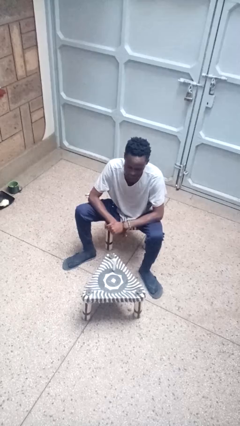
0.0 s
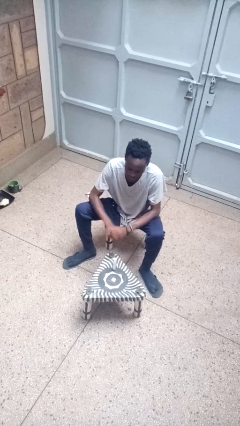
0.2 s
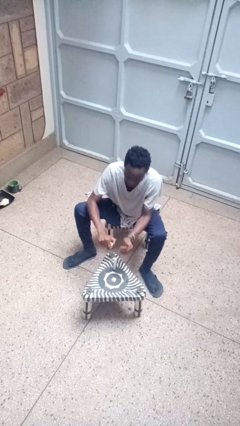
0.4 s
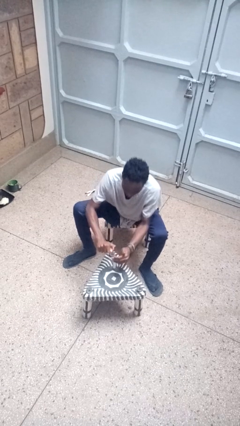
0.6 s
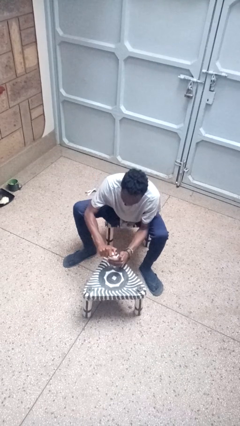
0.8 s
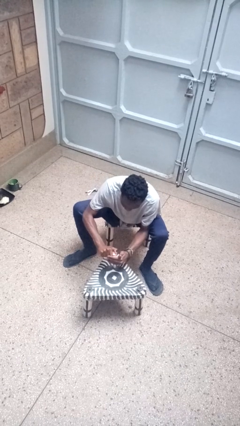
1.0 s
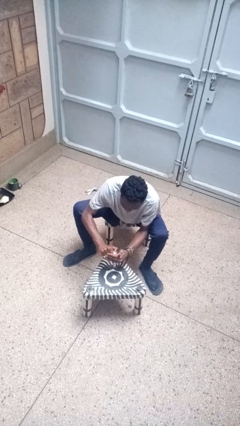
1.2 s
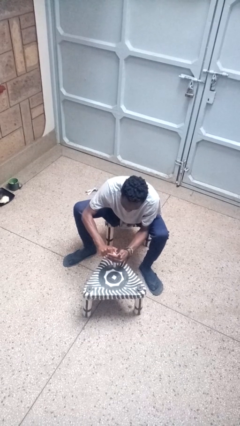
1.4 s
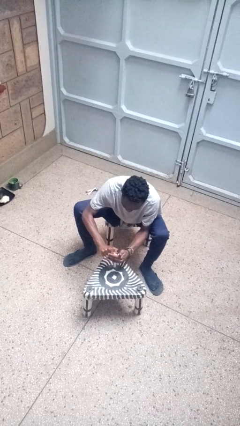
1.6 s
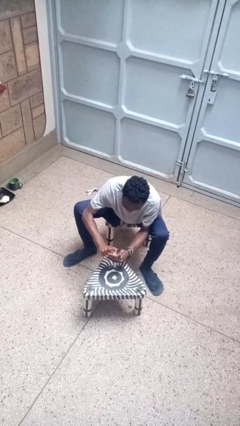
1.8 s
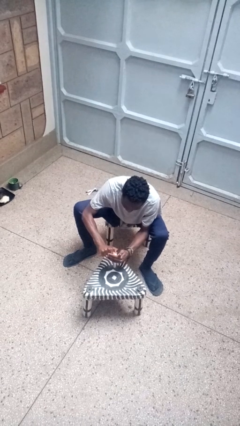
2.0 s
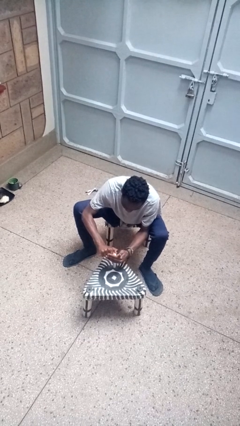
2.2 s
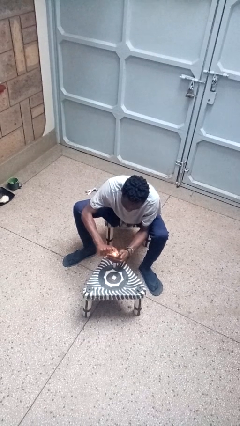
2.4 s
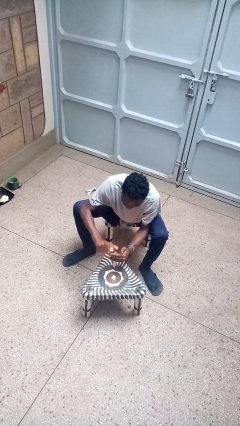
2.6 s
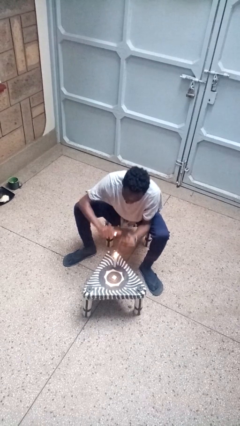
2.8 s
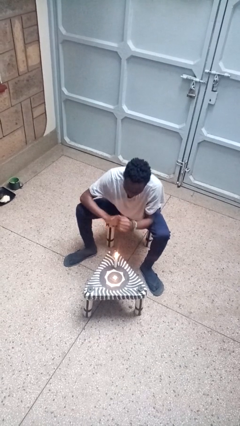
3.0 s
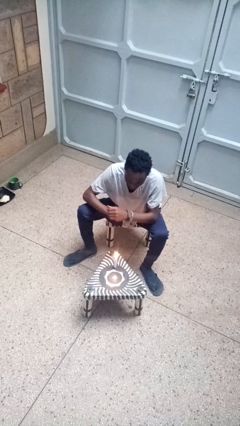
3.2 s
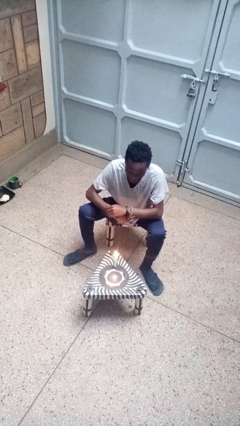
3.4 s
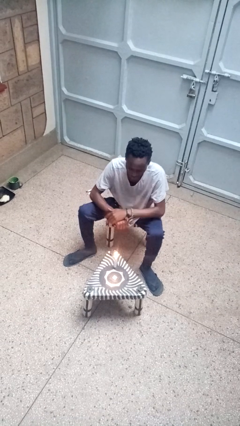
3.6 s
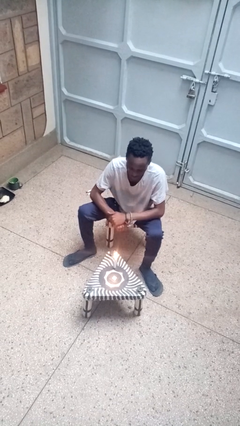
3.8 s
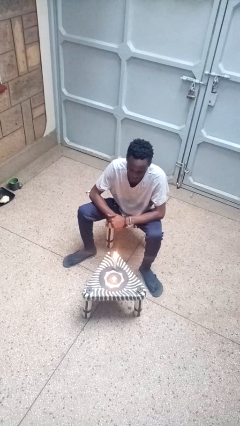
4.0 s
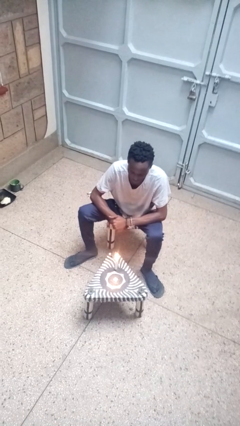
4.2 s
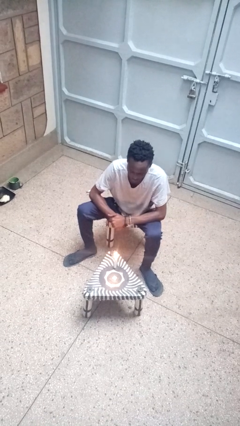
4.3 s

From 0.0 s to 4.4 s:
person lights candle

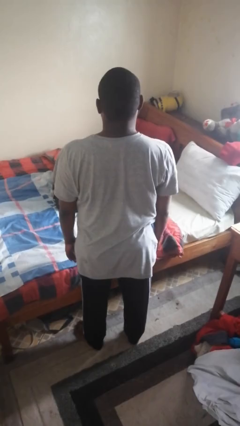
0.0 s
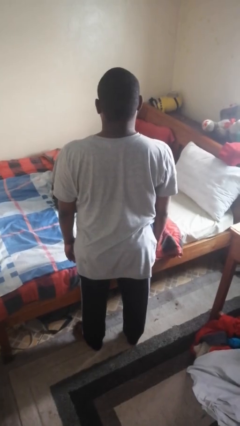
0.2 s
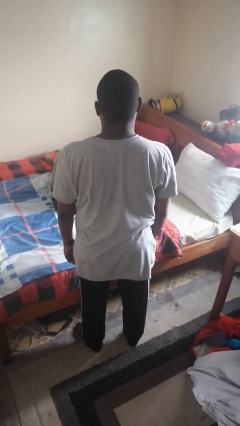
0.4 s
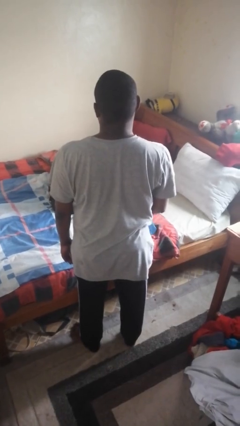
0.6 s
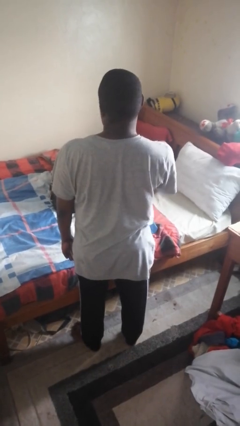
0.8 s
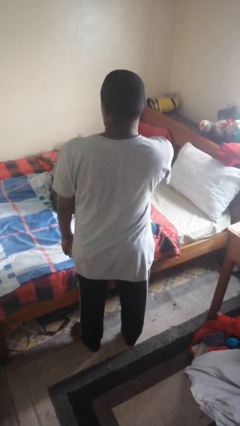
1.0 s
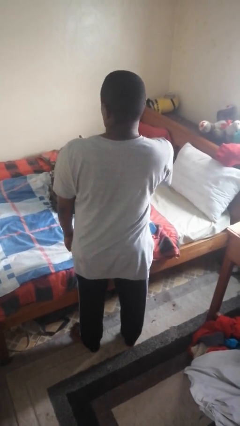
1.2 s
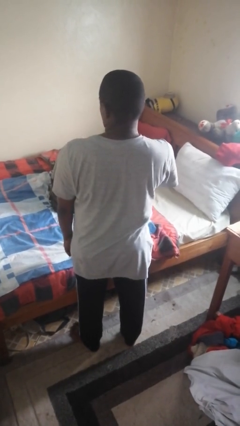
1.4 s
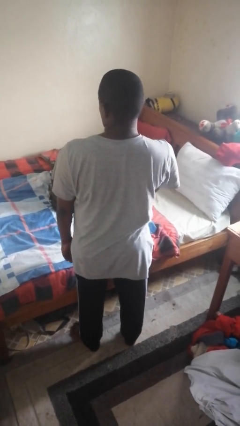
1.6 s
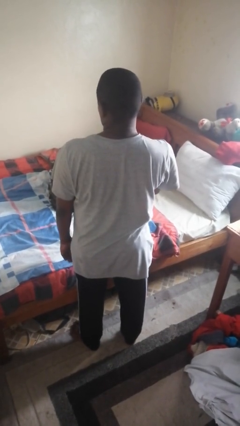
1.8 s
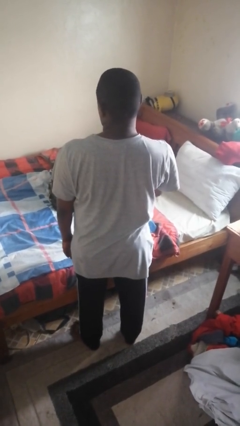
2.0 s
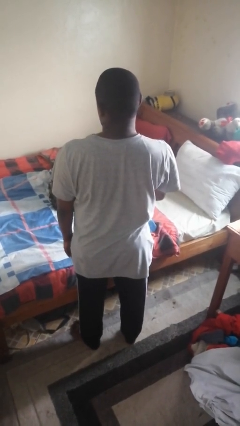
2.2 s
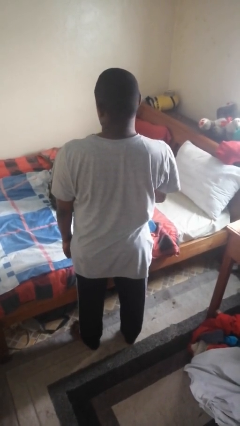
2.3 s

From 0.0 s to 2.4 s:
person swats bug

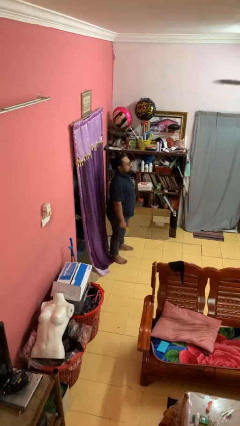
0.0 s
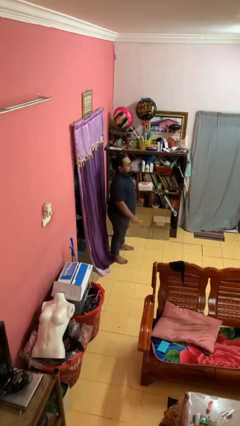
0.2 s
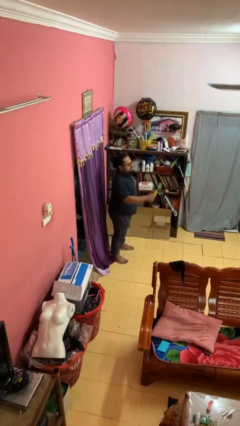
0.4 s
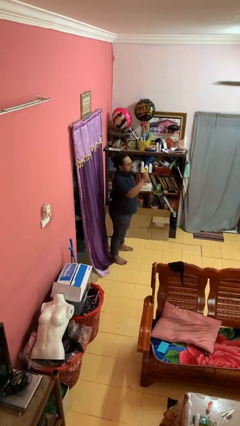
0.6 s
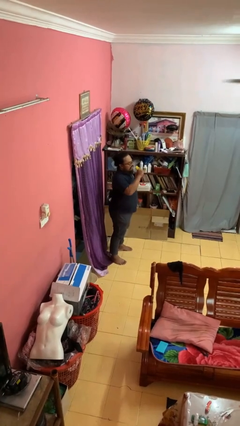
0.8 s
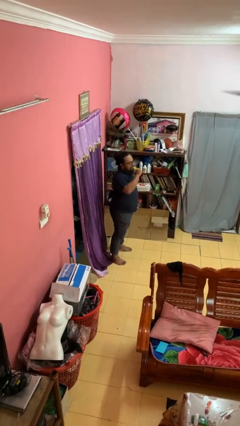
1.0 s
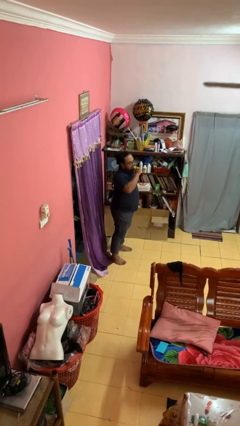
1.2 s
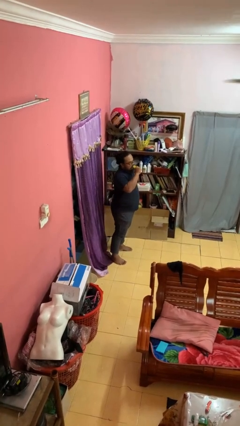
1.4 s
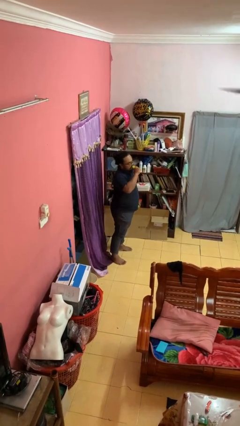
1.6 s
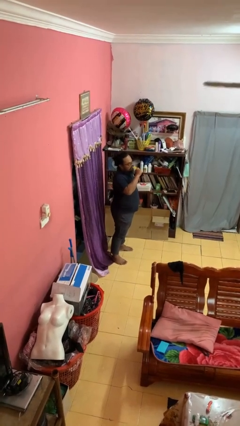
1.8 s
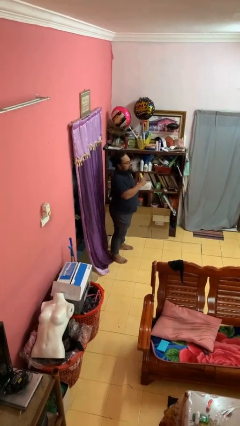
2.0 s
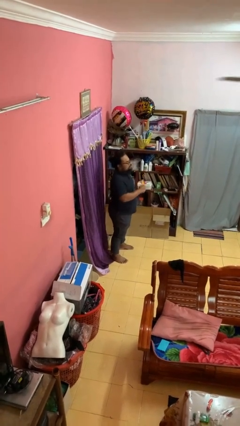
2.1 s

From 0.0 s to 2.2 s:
person eats banana

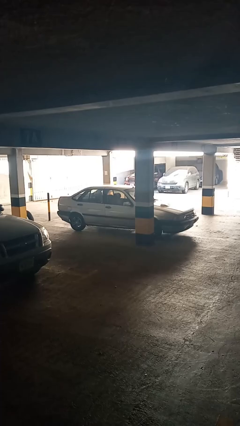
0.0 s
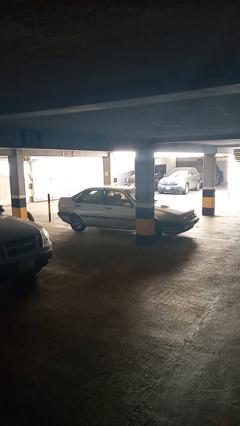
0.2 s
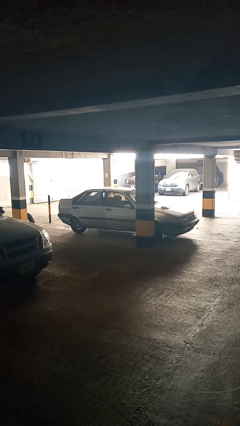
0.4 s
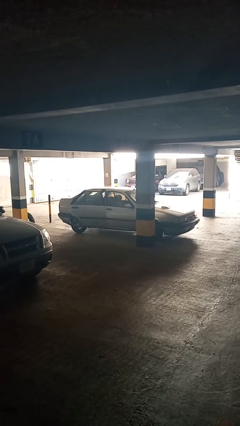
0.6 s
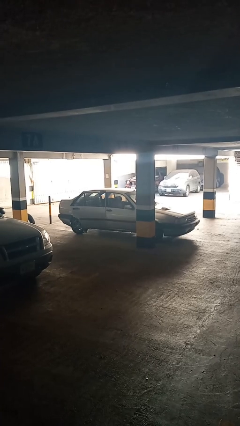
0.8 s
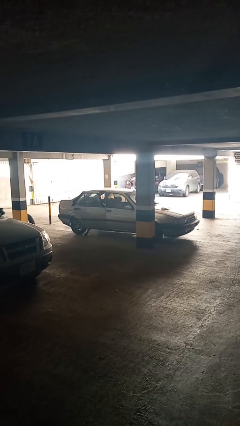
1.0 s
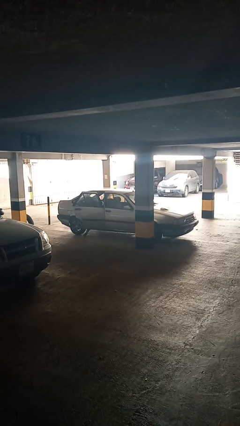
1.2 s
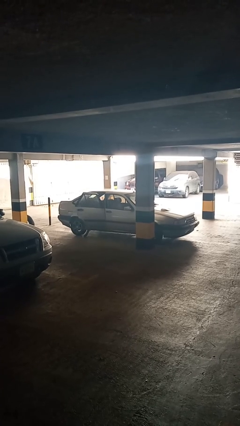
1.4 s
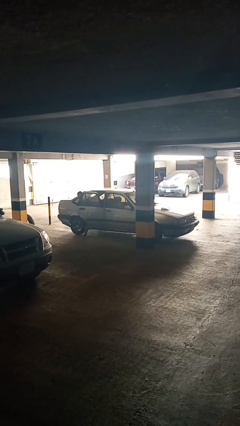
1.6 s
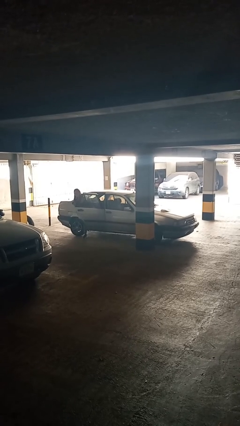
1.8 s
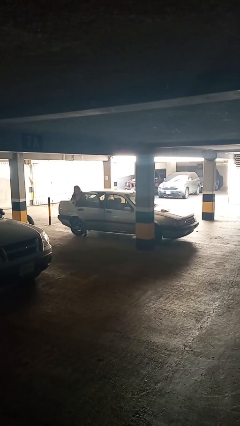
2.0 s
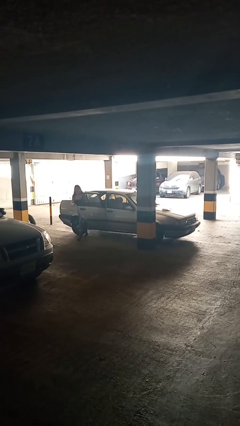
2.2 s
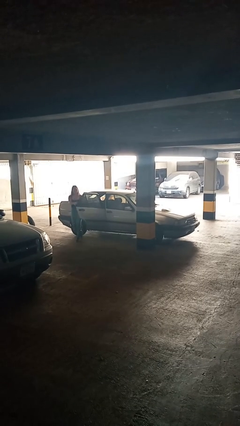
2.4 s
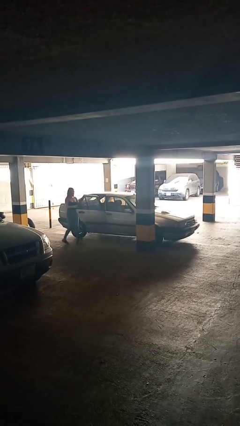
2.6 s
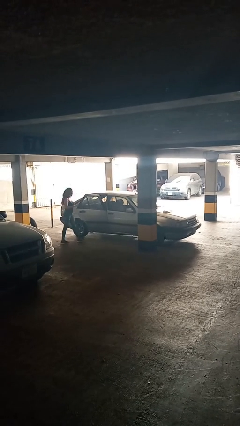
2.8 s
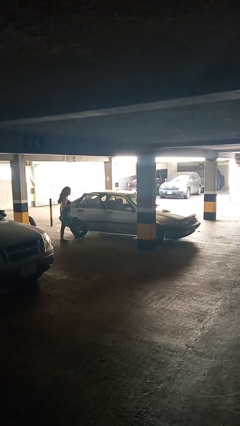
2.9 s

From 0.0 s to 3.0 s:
car drops off person

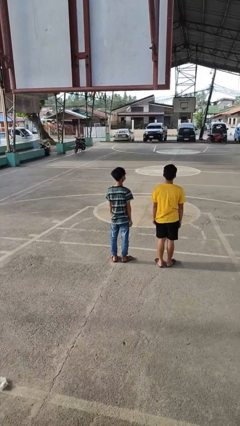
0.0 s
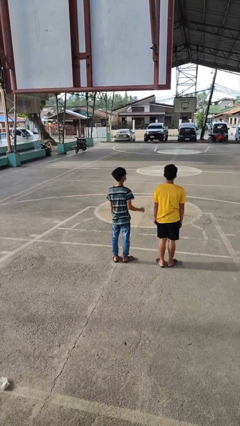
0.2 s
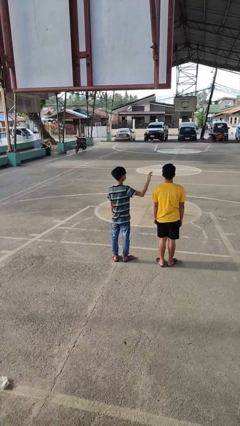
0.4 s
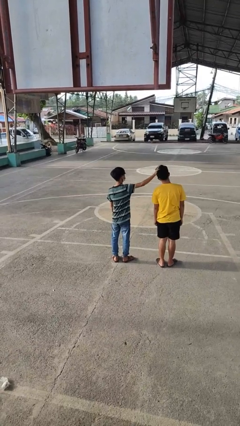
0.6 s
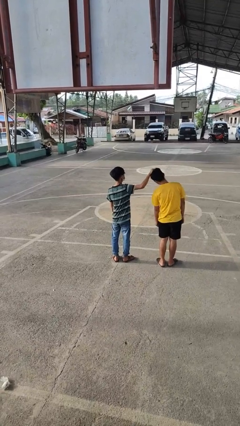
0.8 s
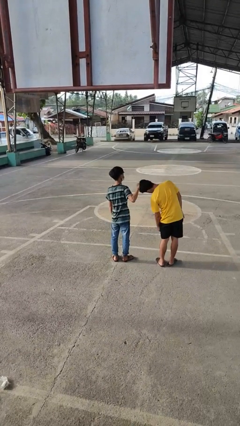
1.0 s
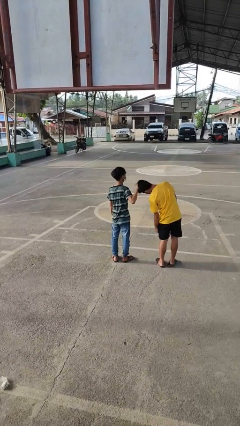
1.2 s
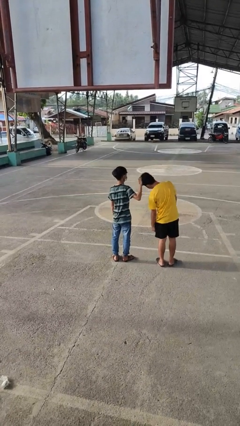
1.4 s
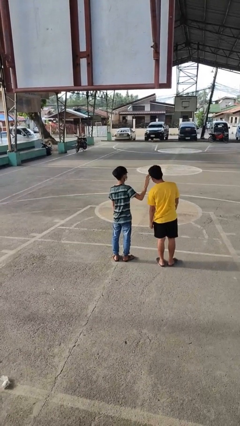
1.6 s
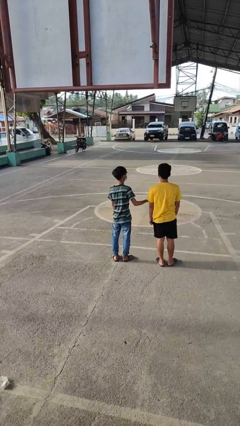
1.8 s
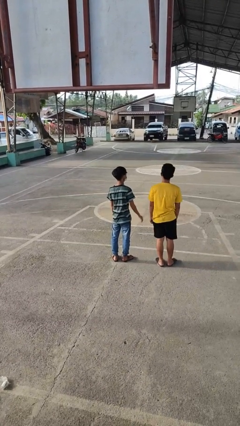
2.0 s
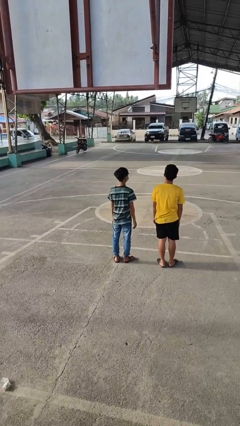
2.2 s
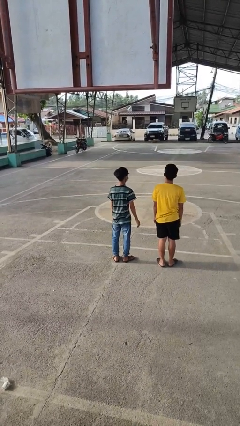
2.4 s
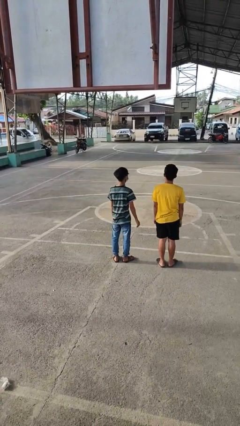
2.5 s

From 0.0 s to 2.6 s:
person grabs person by hair

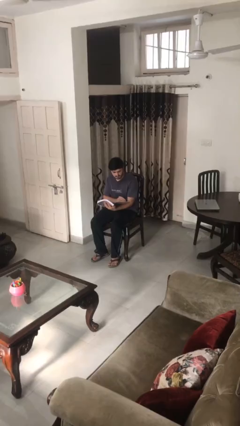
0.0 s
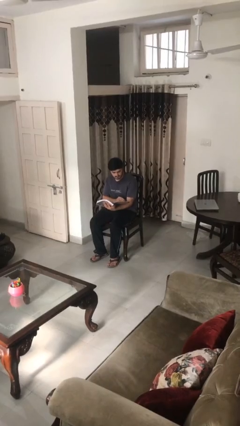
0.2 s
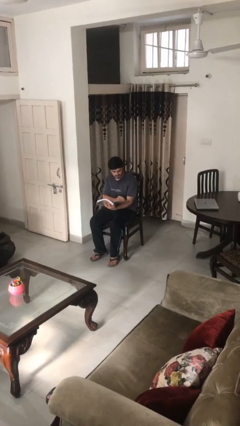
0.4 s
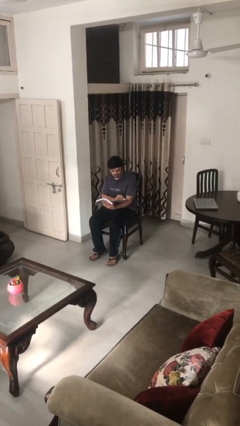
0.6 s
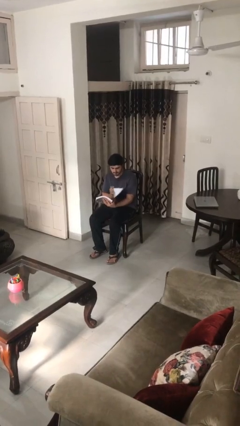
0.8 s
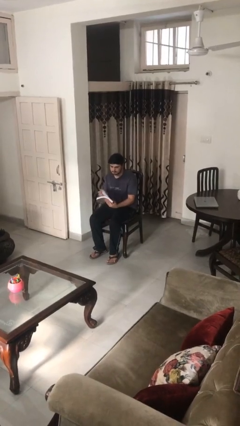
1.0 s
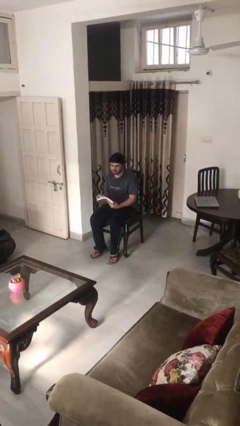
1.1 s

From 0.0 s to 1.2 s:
person reads document

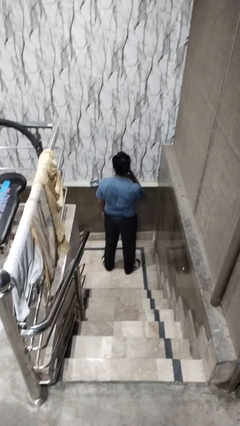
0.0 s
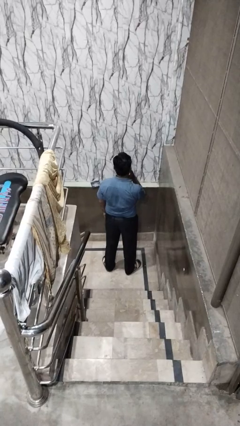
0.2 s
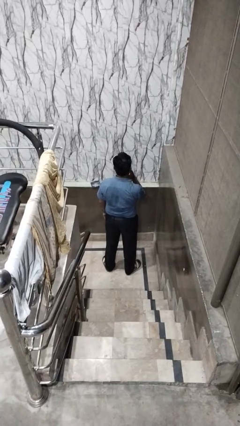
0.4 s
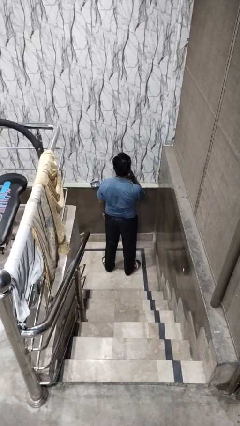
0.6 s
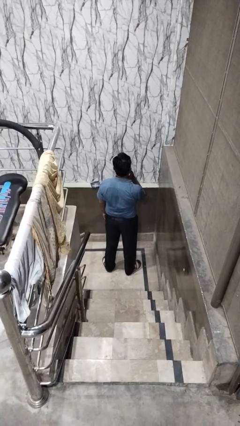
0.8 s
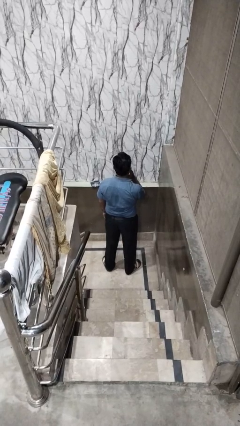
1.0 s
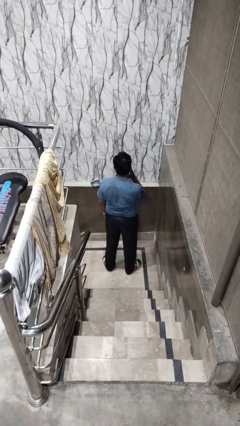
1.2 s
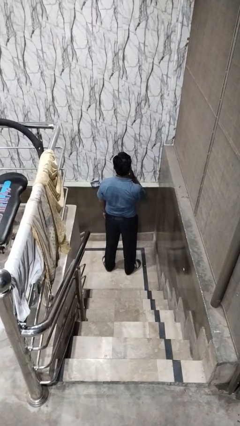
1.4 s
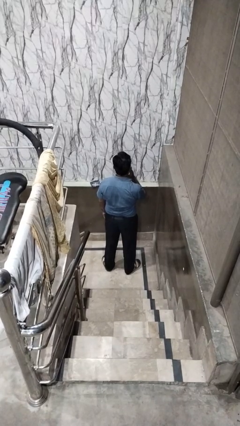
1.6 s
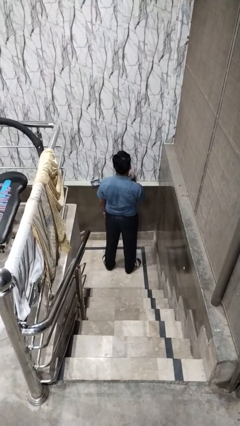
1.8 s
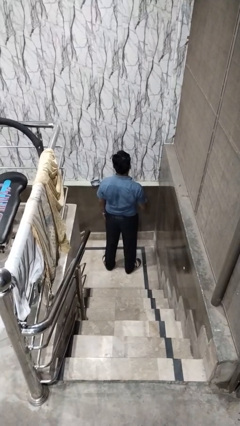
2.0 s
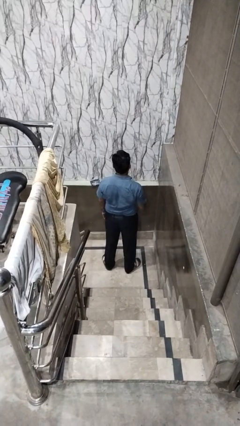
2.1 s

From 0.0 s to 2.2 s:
person strokes chin
